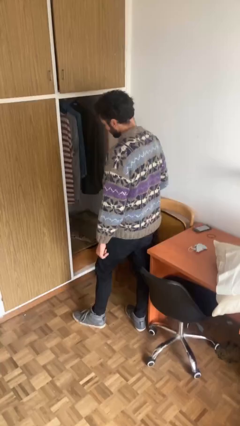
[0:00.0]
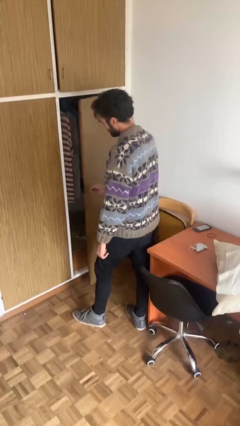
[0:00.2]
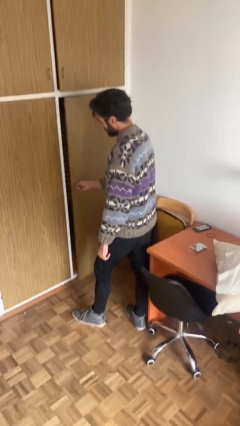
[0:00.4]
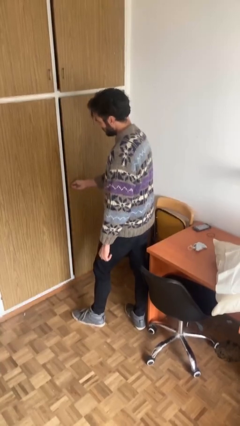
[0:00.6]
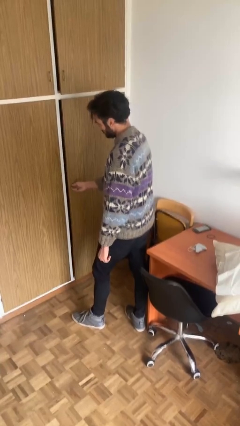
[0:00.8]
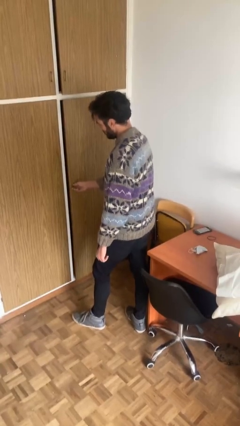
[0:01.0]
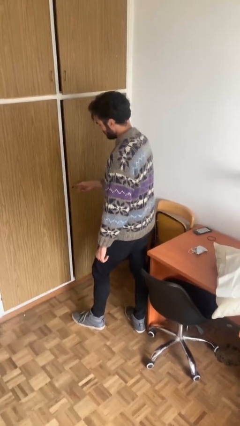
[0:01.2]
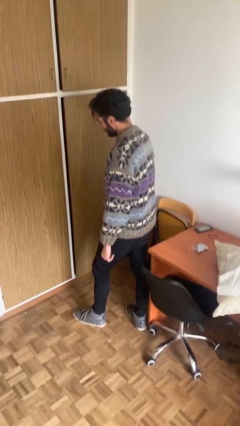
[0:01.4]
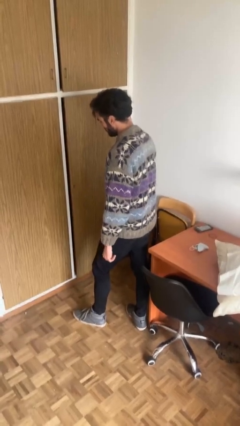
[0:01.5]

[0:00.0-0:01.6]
person closes closet door

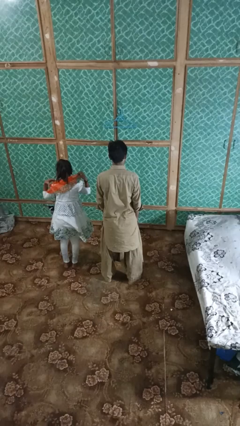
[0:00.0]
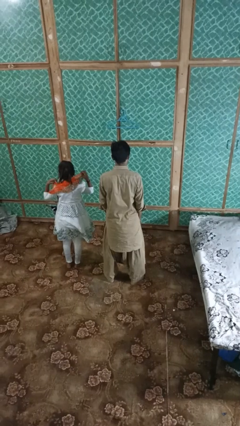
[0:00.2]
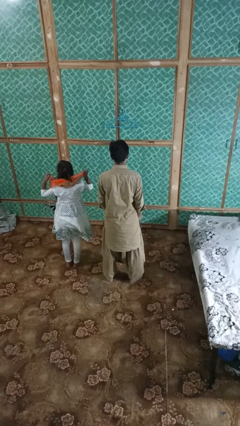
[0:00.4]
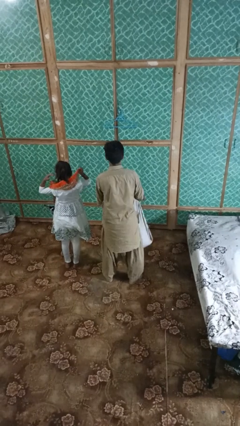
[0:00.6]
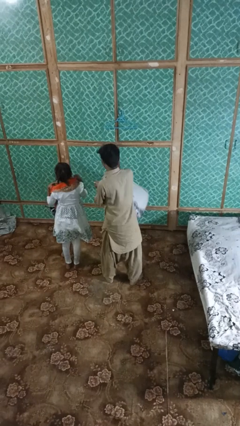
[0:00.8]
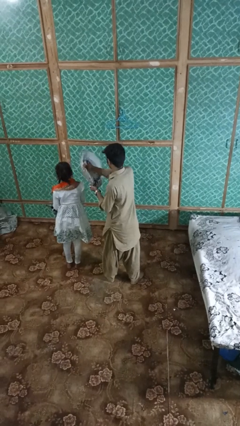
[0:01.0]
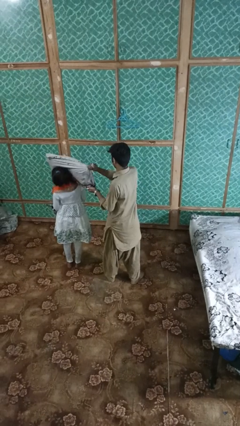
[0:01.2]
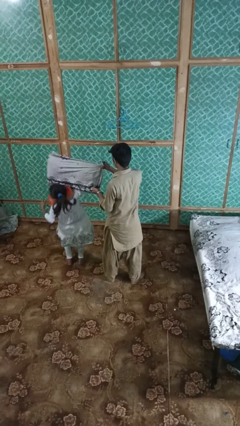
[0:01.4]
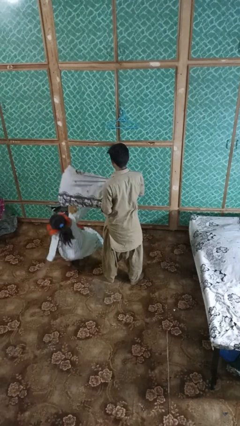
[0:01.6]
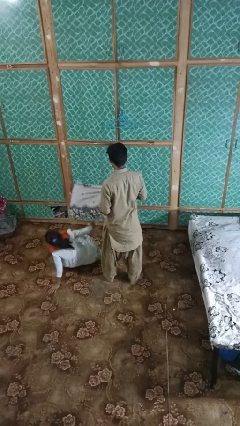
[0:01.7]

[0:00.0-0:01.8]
person hits person with pillow

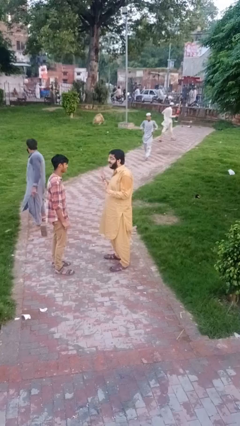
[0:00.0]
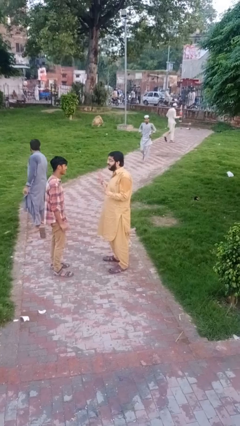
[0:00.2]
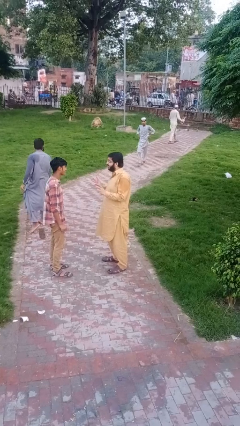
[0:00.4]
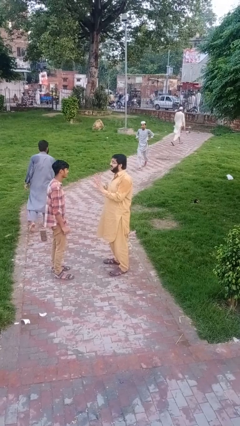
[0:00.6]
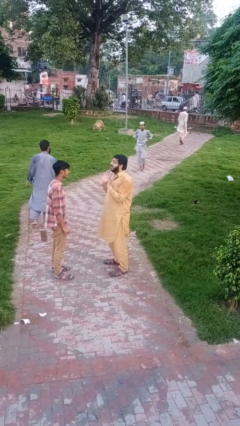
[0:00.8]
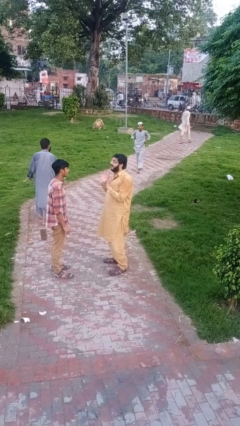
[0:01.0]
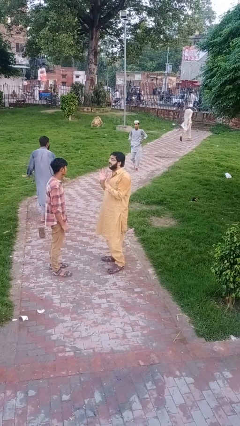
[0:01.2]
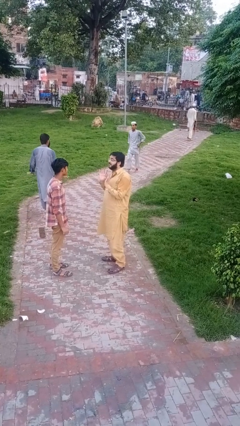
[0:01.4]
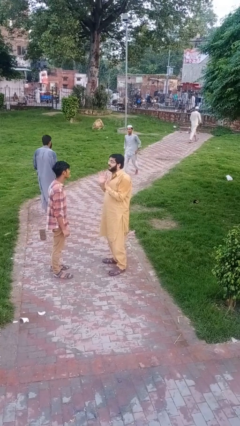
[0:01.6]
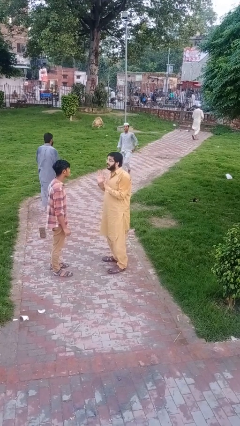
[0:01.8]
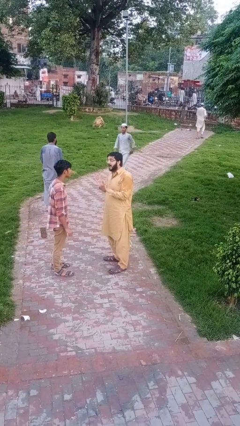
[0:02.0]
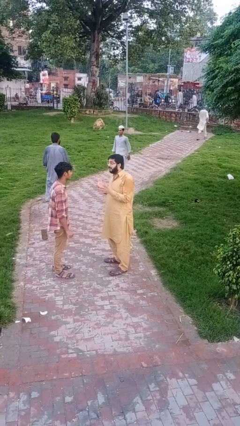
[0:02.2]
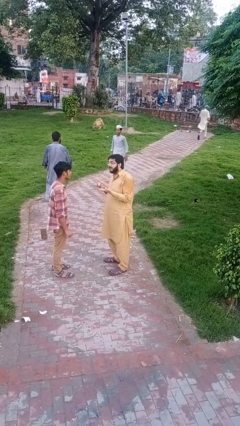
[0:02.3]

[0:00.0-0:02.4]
person talks to person

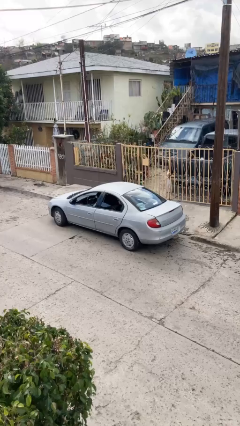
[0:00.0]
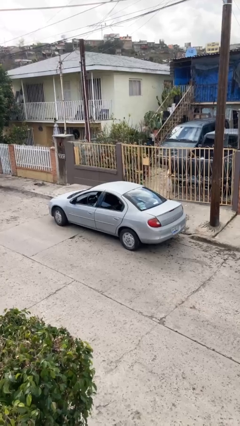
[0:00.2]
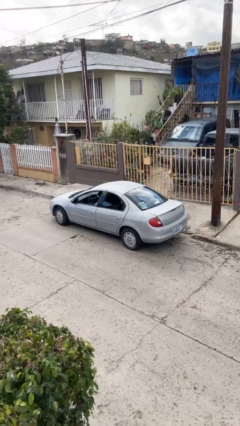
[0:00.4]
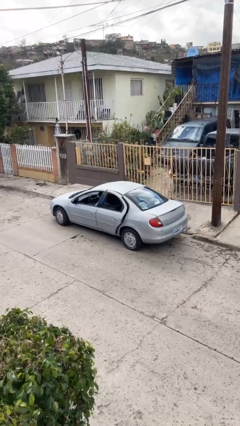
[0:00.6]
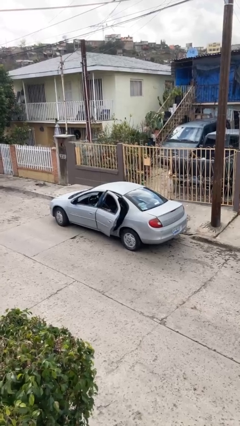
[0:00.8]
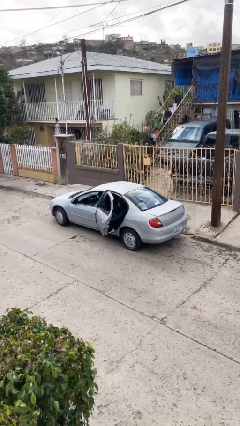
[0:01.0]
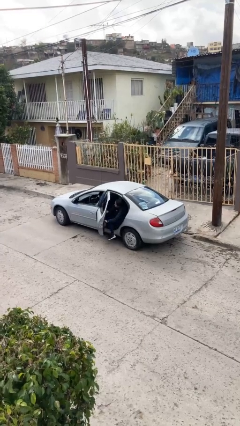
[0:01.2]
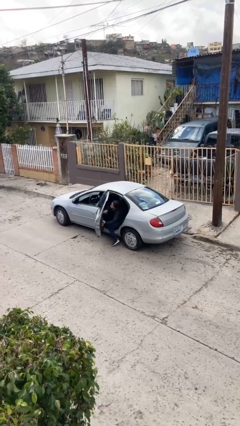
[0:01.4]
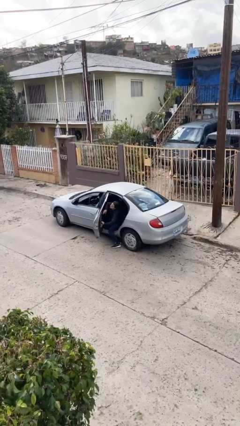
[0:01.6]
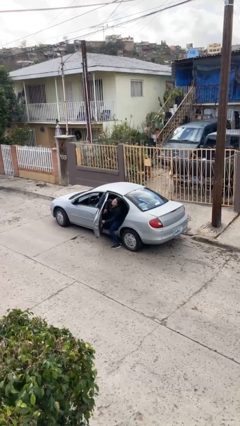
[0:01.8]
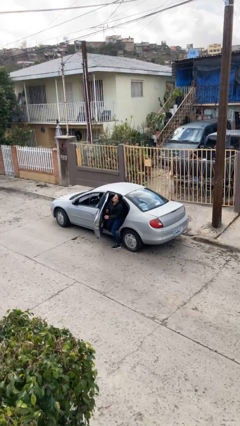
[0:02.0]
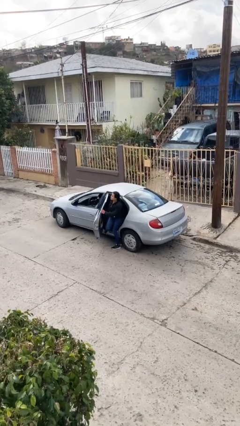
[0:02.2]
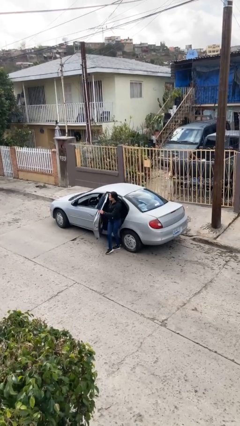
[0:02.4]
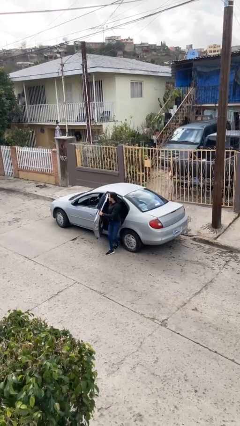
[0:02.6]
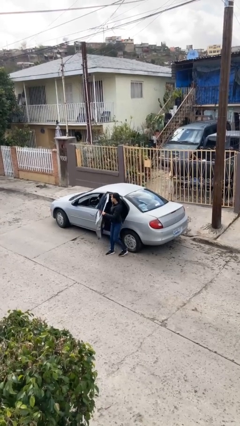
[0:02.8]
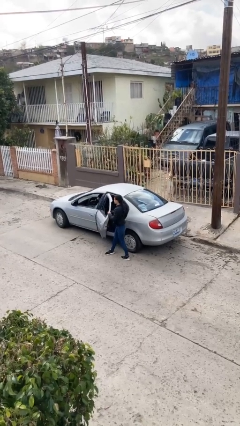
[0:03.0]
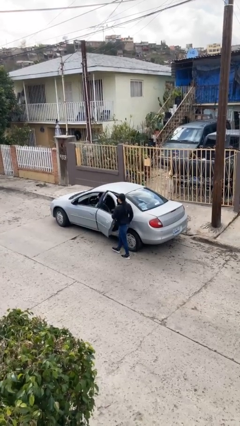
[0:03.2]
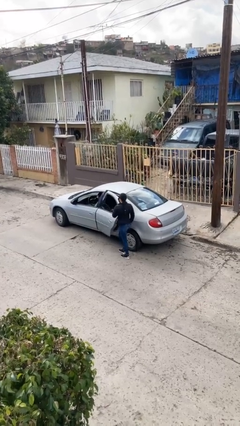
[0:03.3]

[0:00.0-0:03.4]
car drops off person

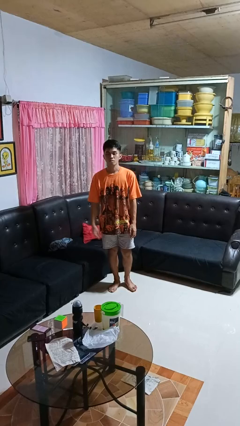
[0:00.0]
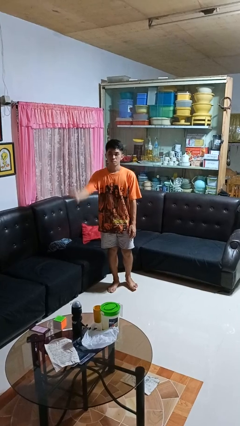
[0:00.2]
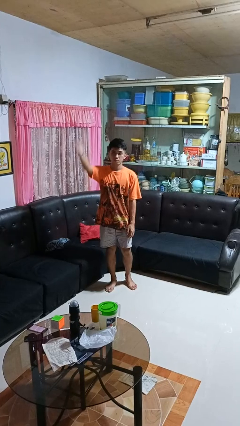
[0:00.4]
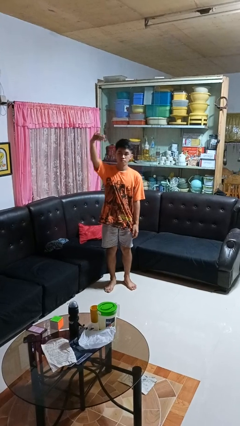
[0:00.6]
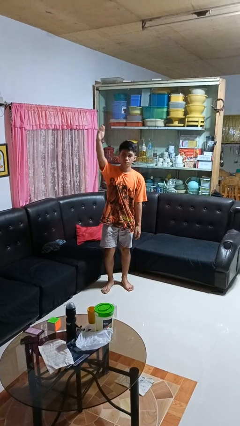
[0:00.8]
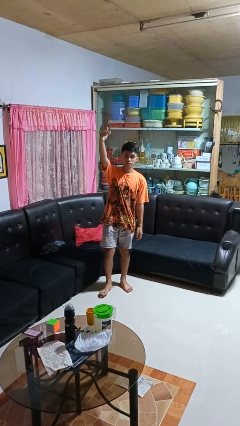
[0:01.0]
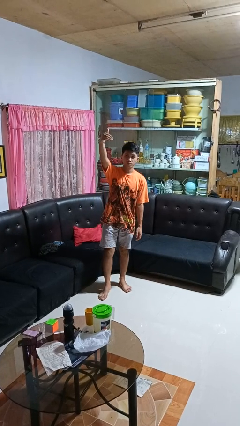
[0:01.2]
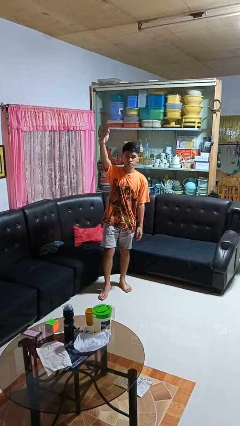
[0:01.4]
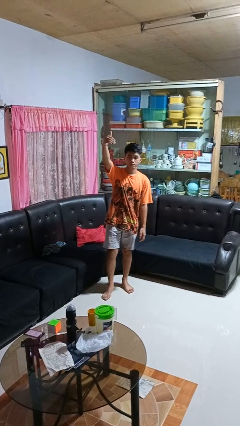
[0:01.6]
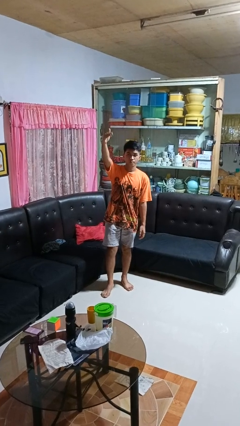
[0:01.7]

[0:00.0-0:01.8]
person gestures come here

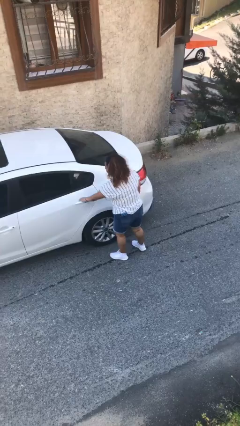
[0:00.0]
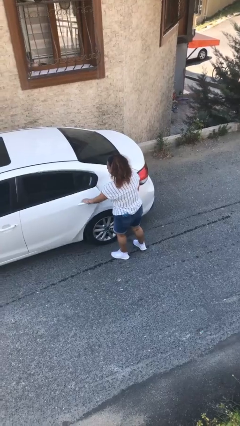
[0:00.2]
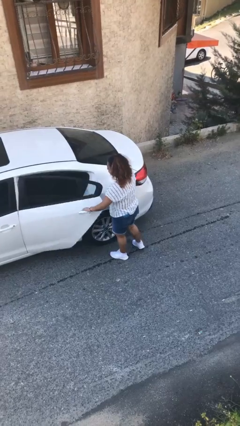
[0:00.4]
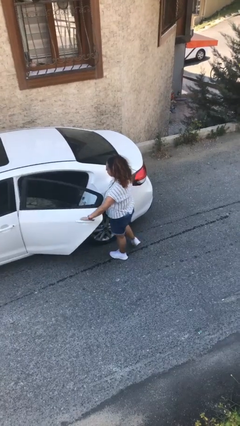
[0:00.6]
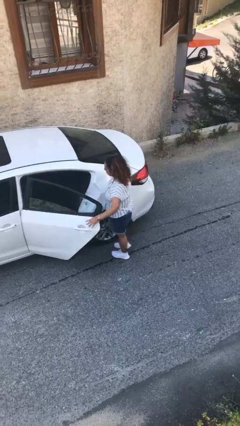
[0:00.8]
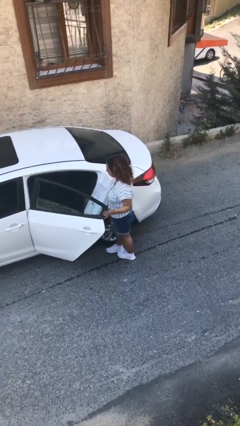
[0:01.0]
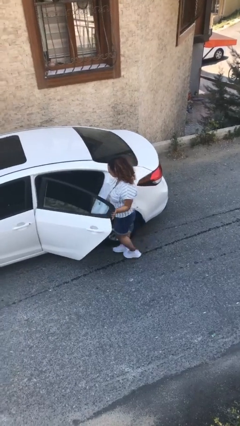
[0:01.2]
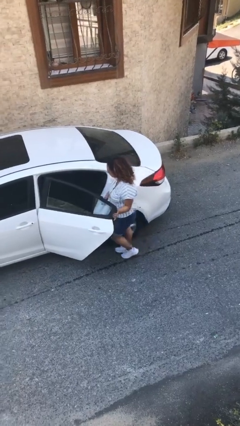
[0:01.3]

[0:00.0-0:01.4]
person opens car door

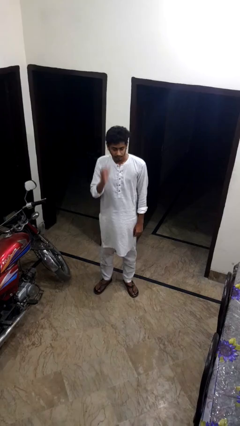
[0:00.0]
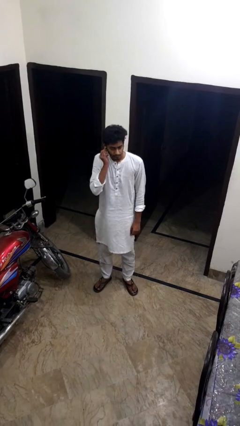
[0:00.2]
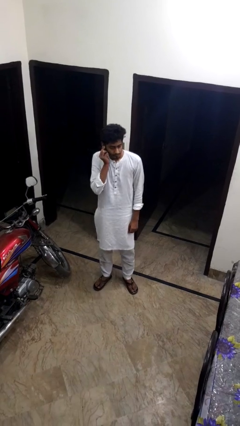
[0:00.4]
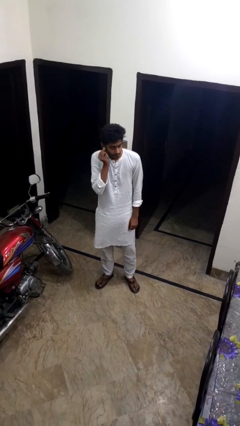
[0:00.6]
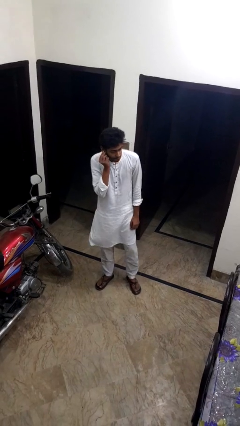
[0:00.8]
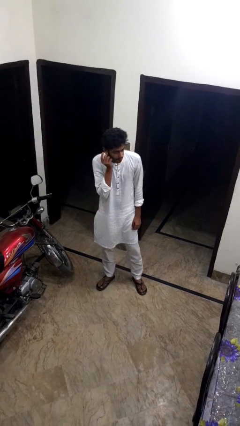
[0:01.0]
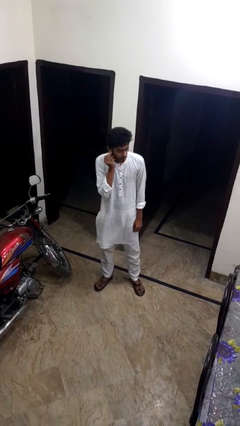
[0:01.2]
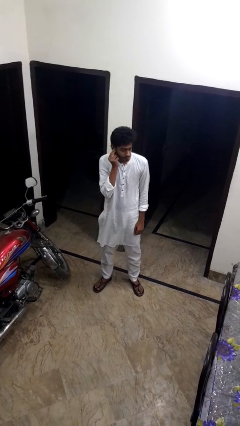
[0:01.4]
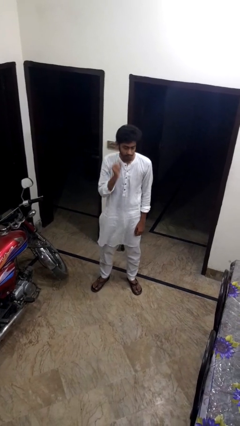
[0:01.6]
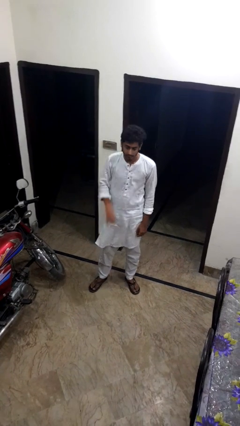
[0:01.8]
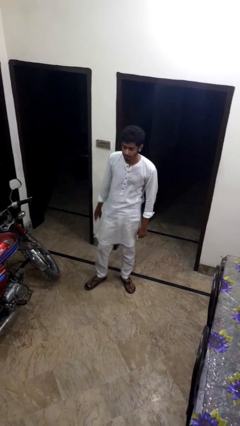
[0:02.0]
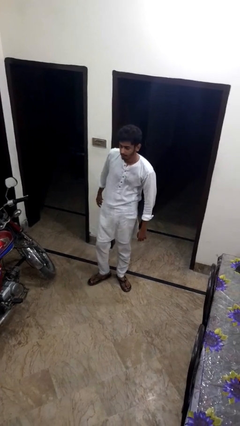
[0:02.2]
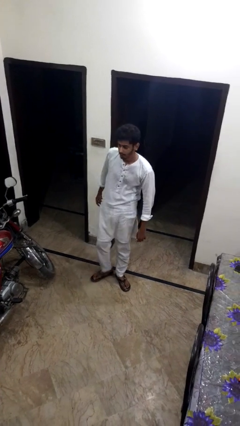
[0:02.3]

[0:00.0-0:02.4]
person touches earlobe

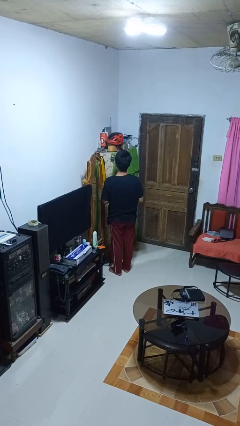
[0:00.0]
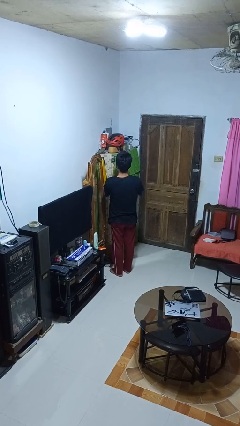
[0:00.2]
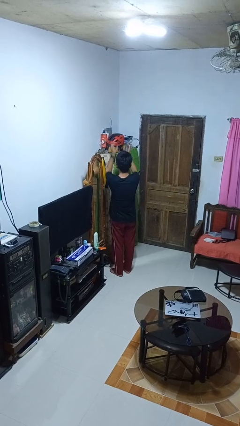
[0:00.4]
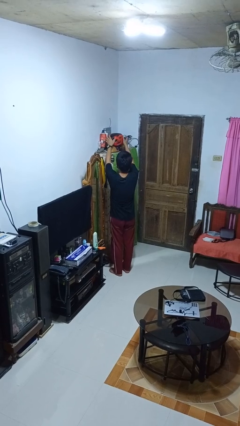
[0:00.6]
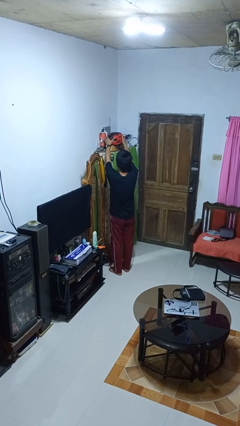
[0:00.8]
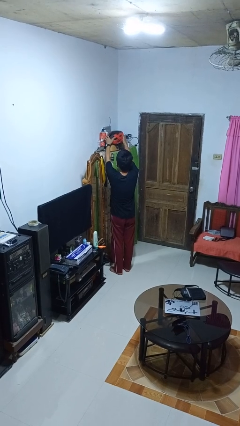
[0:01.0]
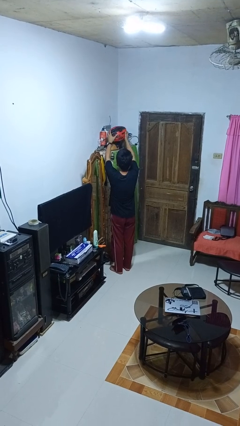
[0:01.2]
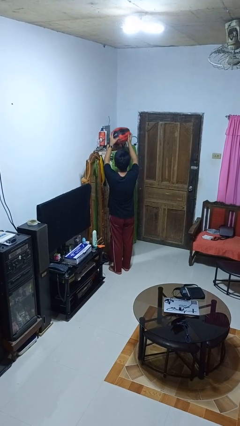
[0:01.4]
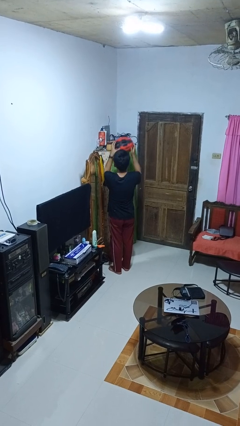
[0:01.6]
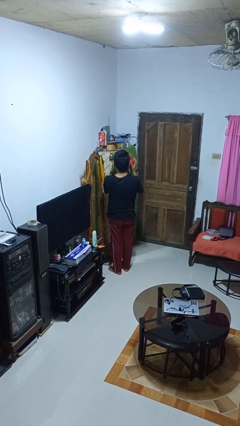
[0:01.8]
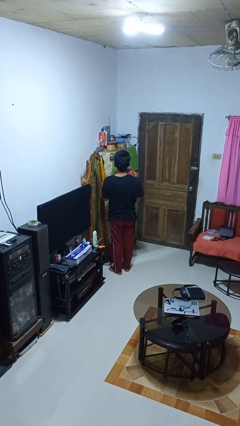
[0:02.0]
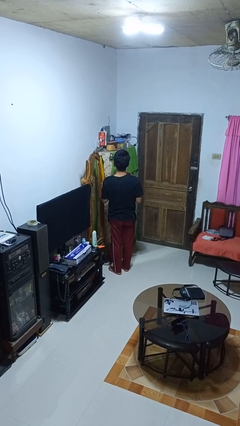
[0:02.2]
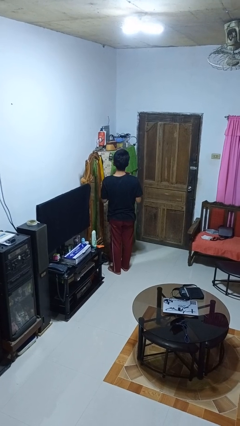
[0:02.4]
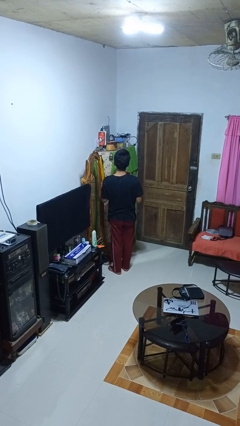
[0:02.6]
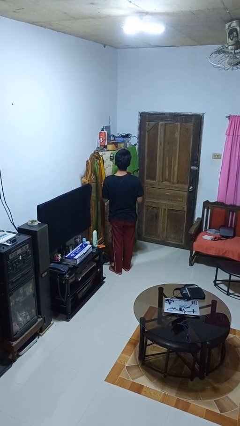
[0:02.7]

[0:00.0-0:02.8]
person picks up object from shelf
